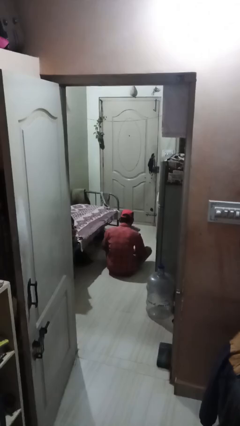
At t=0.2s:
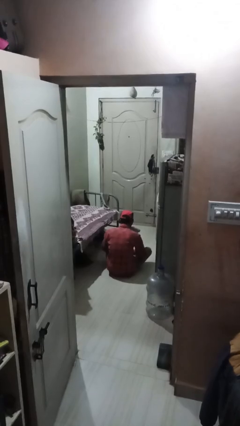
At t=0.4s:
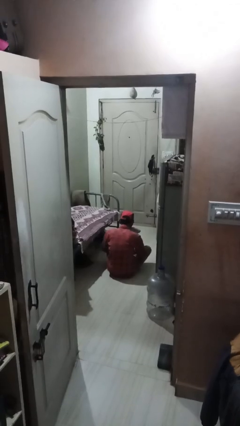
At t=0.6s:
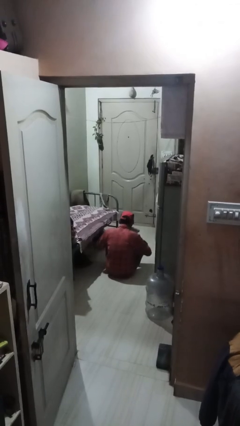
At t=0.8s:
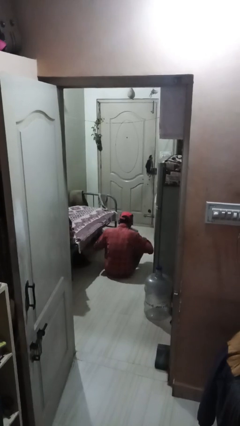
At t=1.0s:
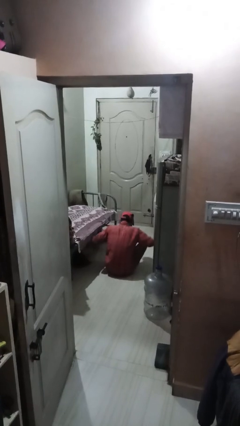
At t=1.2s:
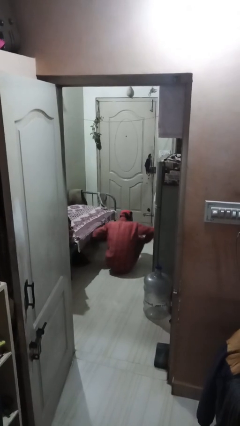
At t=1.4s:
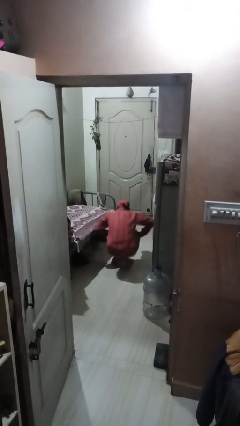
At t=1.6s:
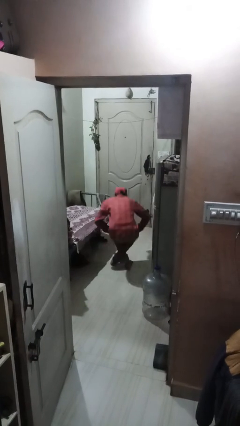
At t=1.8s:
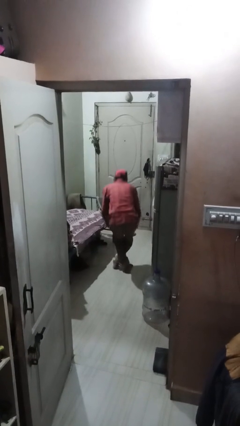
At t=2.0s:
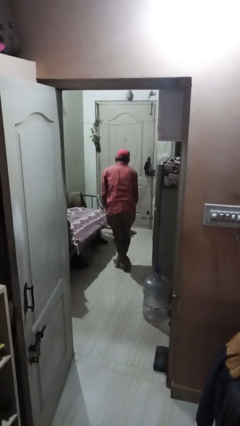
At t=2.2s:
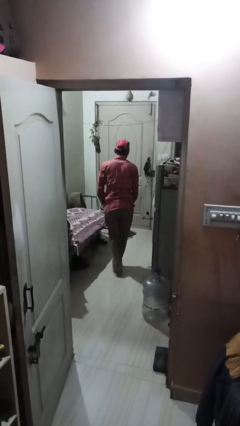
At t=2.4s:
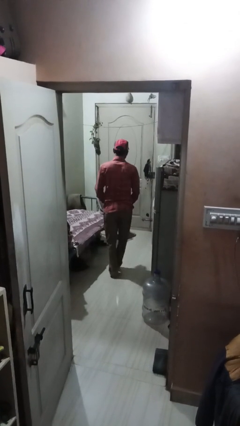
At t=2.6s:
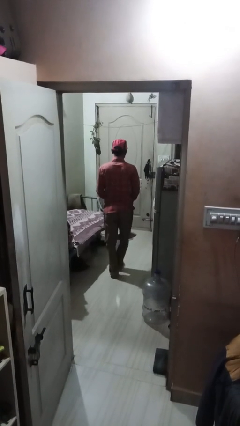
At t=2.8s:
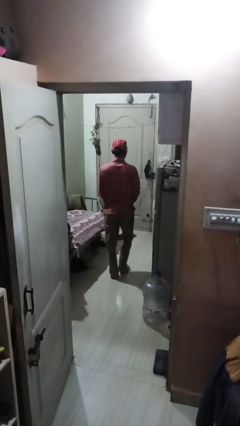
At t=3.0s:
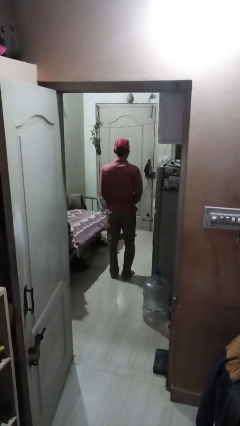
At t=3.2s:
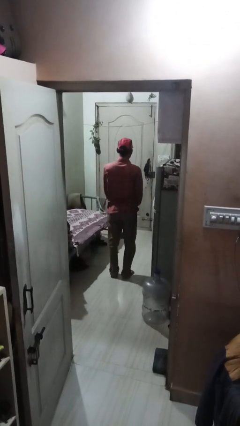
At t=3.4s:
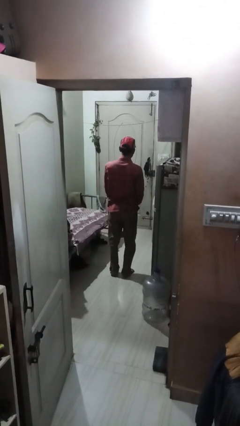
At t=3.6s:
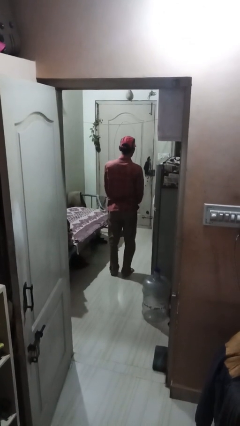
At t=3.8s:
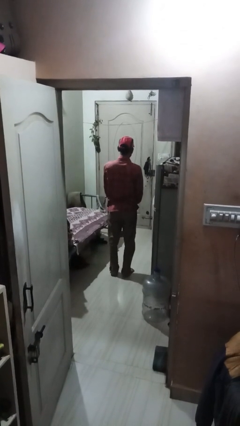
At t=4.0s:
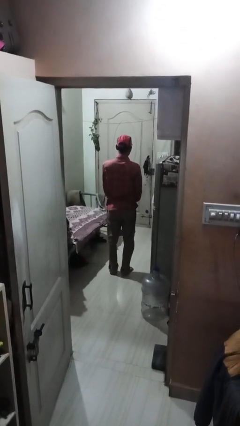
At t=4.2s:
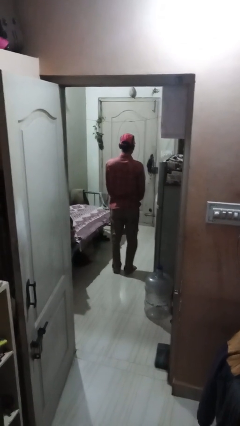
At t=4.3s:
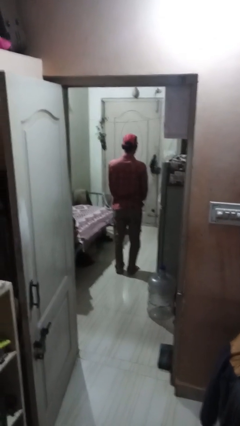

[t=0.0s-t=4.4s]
person stands up from floor

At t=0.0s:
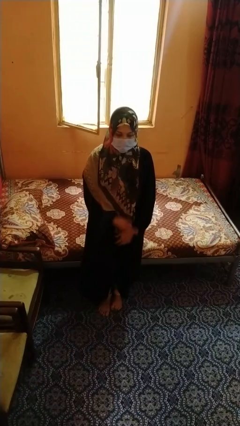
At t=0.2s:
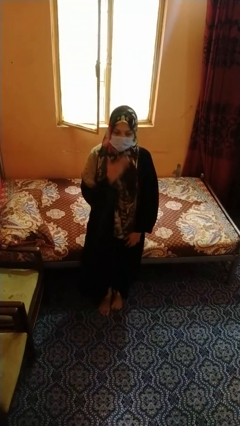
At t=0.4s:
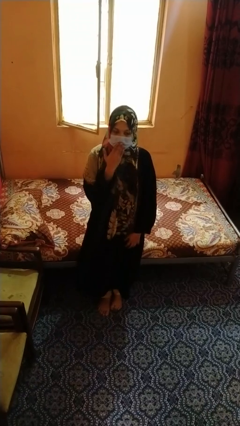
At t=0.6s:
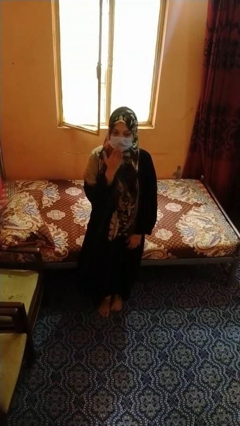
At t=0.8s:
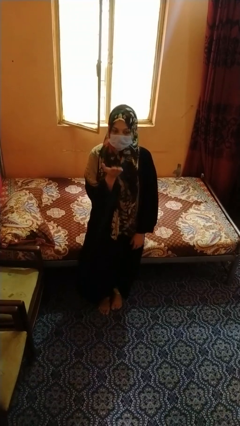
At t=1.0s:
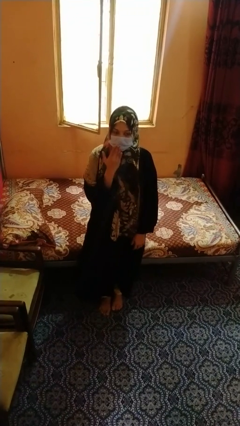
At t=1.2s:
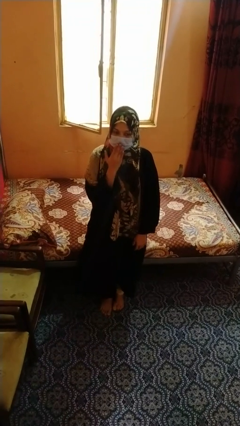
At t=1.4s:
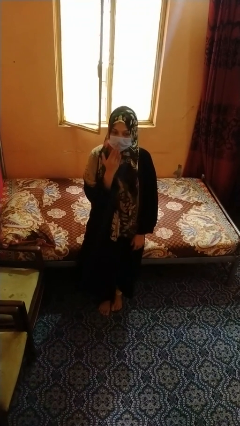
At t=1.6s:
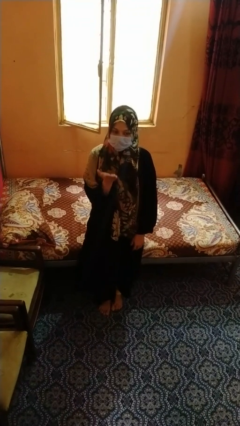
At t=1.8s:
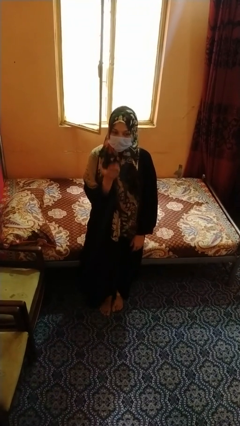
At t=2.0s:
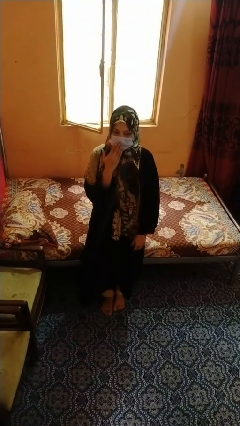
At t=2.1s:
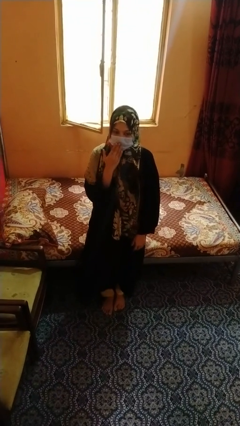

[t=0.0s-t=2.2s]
person gestures blow kiss

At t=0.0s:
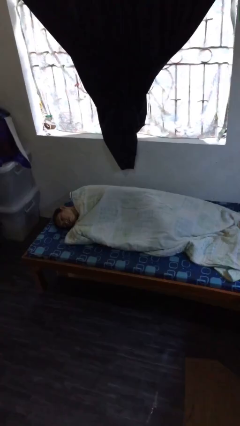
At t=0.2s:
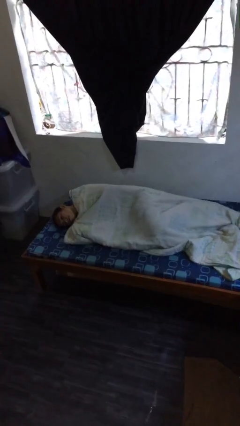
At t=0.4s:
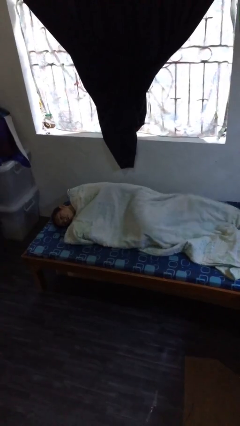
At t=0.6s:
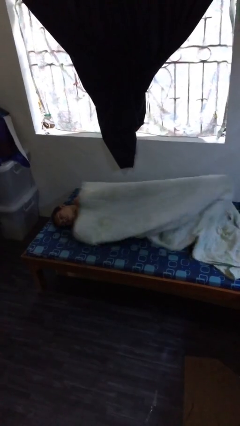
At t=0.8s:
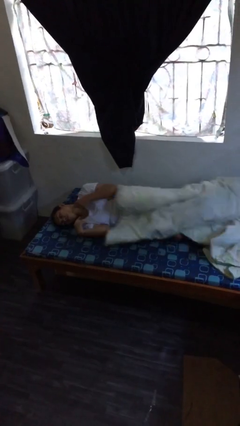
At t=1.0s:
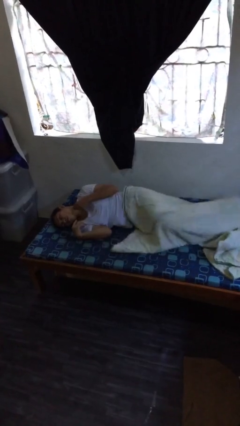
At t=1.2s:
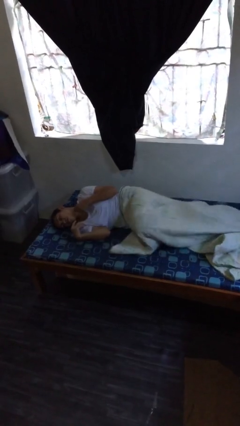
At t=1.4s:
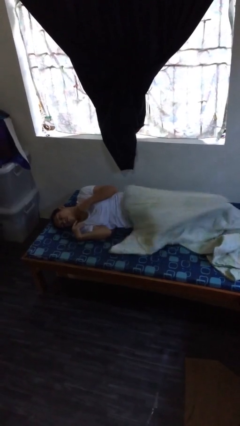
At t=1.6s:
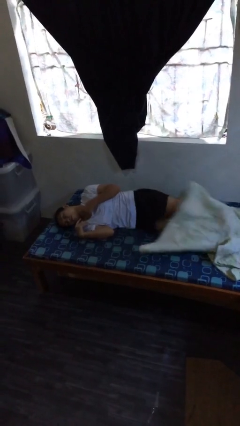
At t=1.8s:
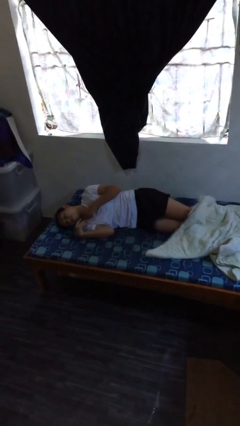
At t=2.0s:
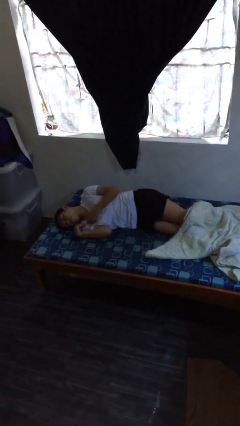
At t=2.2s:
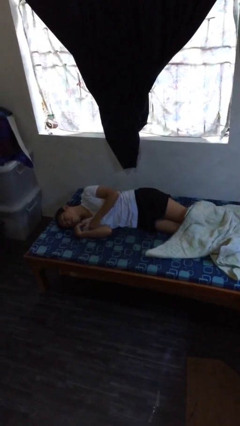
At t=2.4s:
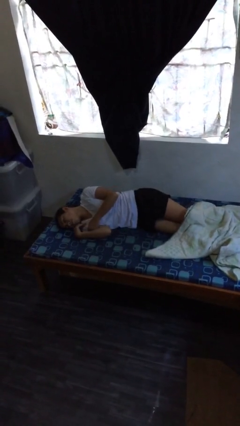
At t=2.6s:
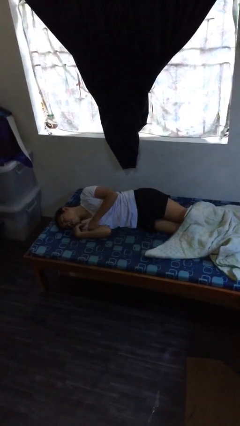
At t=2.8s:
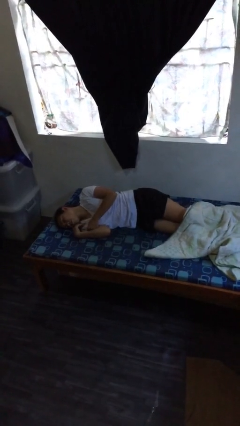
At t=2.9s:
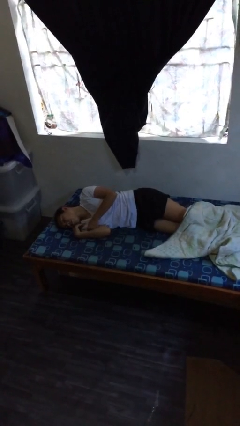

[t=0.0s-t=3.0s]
person uncovers with bedsheets

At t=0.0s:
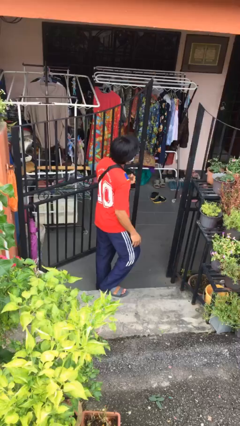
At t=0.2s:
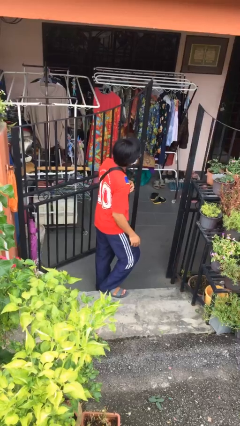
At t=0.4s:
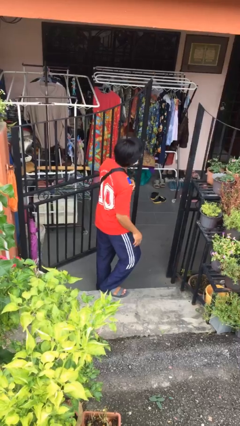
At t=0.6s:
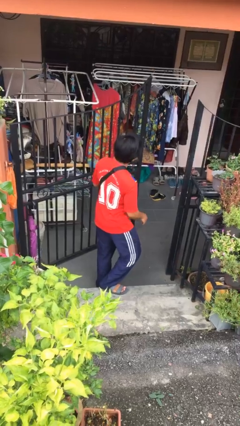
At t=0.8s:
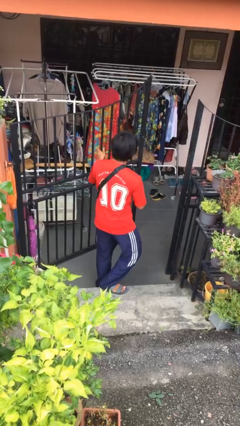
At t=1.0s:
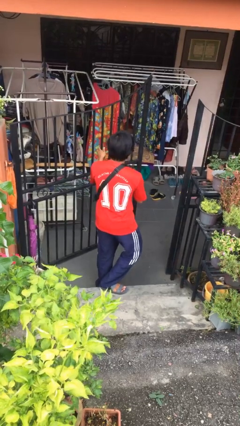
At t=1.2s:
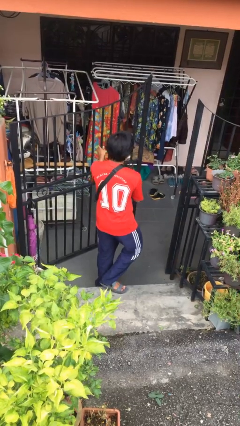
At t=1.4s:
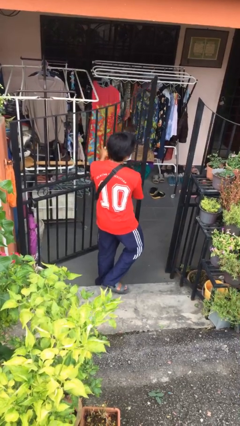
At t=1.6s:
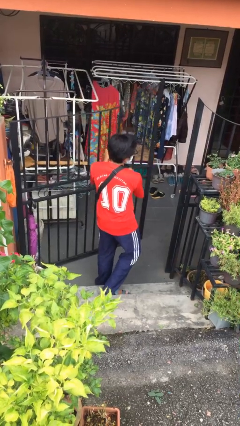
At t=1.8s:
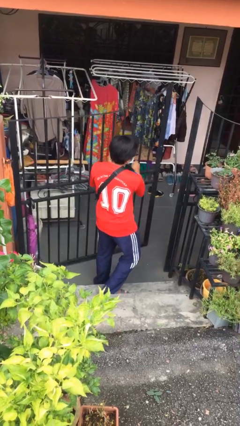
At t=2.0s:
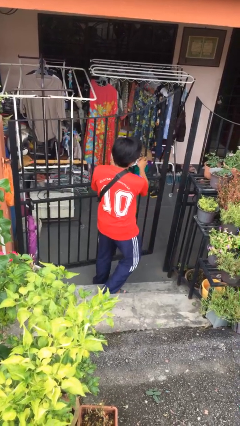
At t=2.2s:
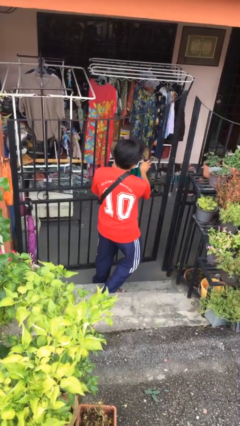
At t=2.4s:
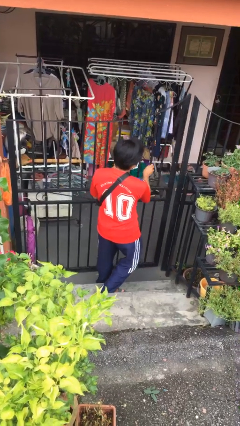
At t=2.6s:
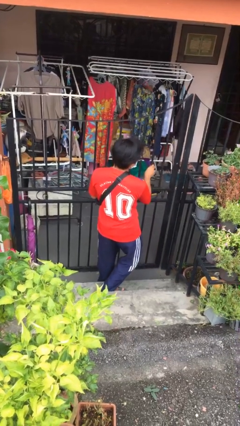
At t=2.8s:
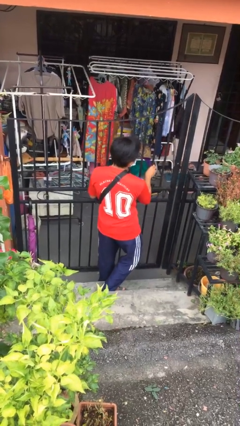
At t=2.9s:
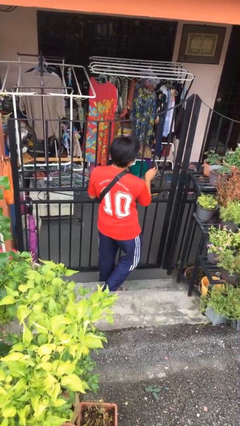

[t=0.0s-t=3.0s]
person closes facility door

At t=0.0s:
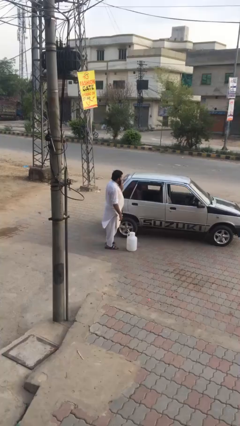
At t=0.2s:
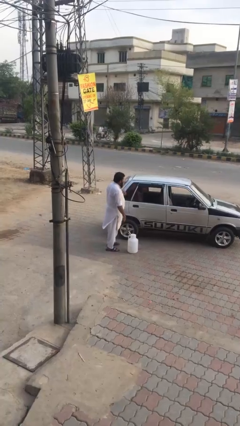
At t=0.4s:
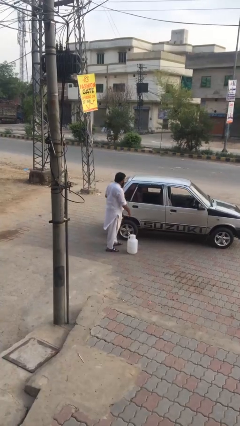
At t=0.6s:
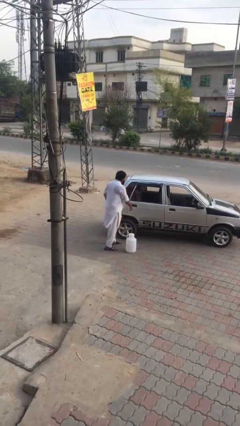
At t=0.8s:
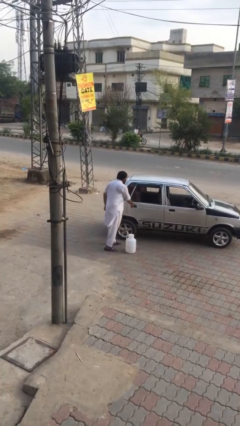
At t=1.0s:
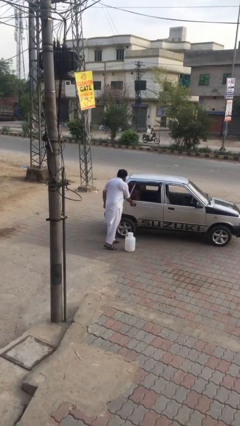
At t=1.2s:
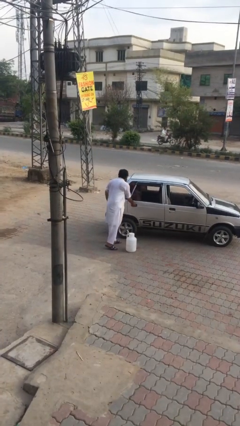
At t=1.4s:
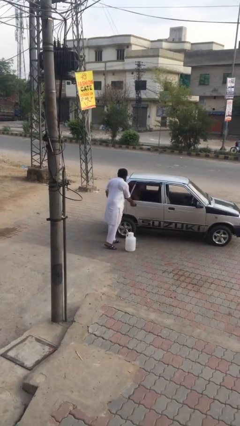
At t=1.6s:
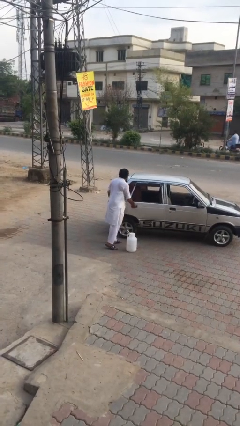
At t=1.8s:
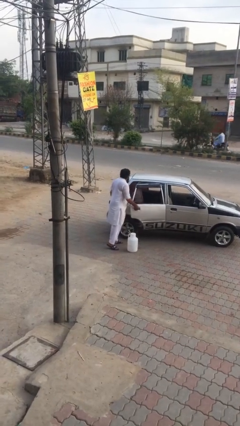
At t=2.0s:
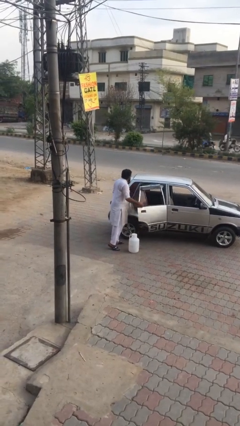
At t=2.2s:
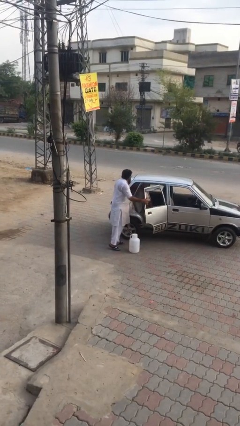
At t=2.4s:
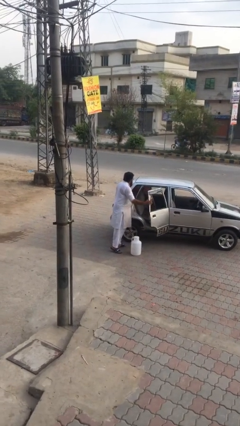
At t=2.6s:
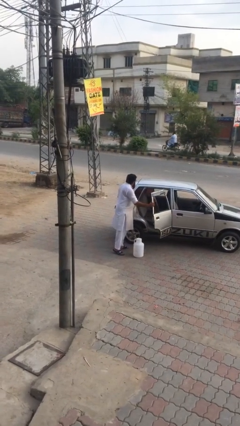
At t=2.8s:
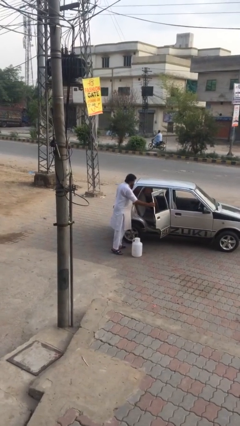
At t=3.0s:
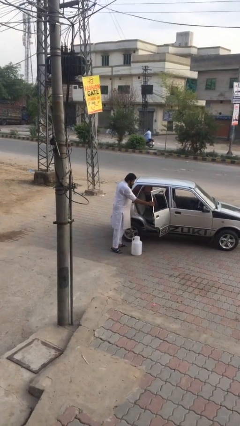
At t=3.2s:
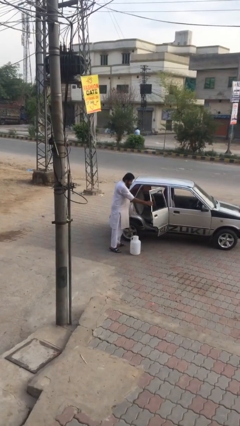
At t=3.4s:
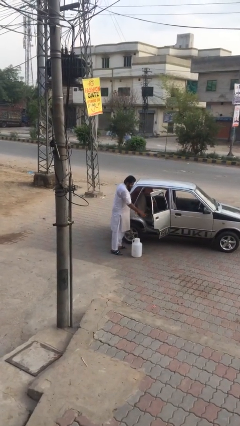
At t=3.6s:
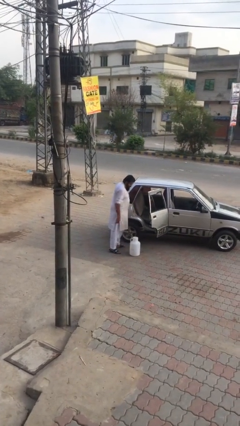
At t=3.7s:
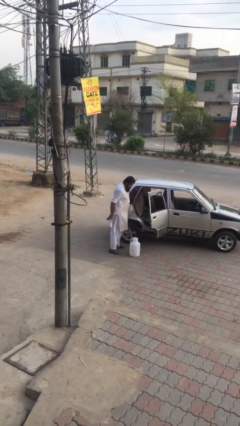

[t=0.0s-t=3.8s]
person opens car door

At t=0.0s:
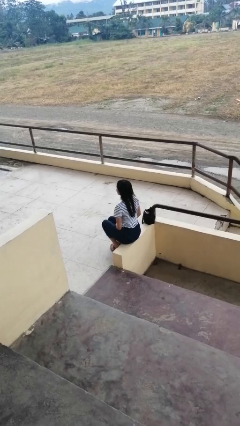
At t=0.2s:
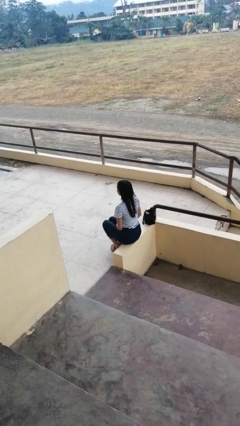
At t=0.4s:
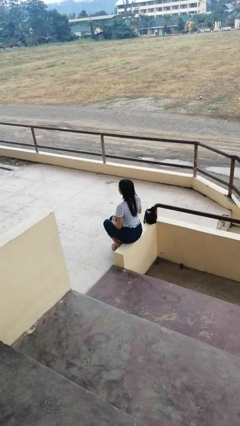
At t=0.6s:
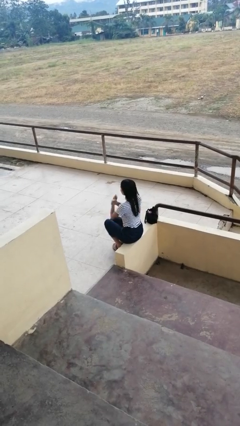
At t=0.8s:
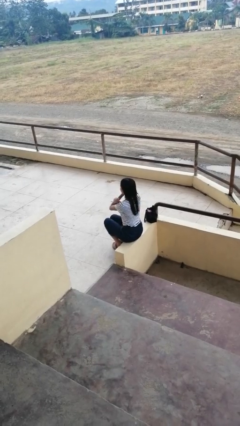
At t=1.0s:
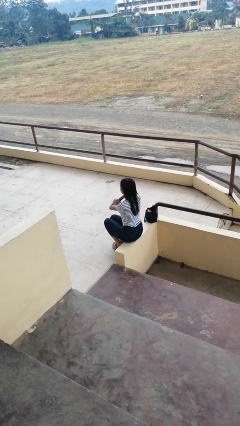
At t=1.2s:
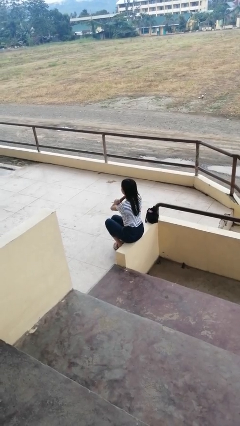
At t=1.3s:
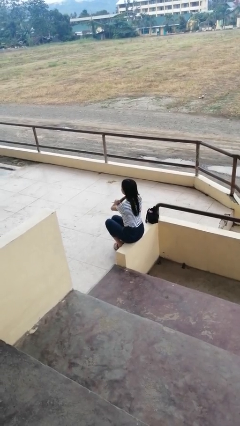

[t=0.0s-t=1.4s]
person gestures arms x
